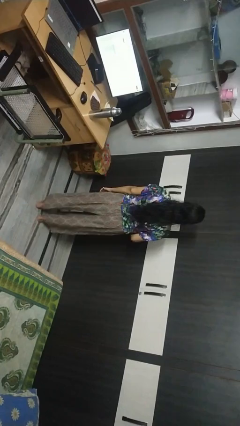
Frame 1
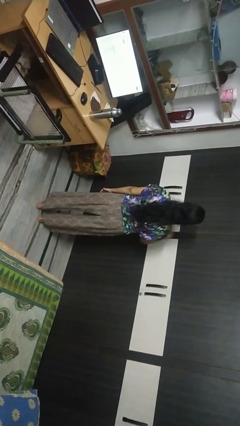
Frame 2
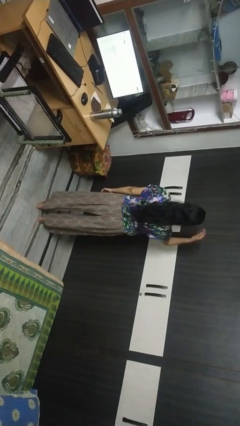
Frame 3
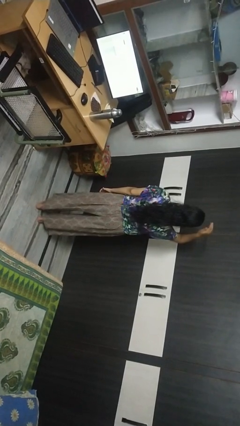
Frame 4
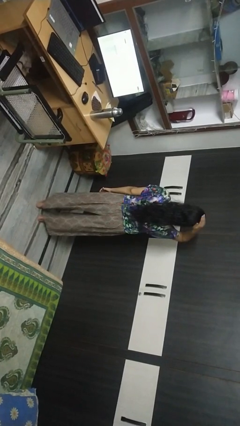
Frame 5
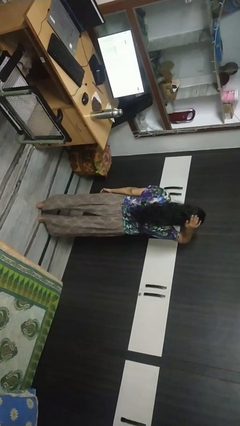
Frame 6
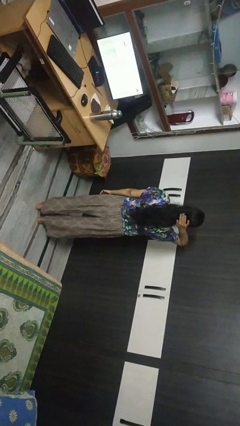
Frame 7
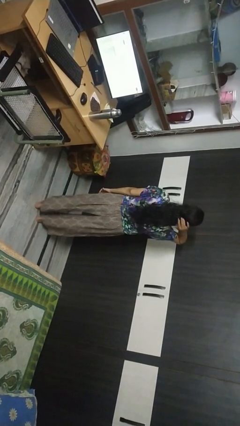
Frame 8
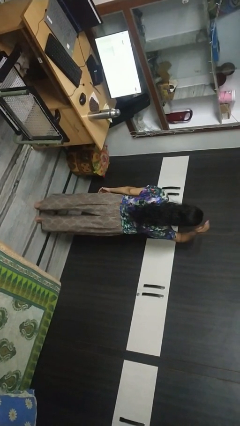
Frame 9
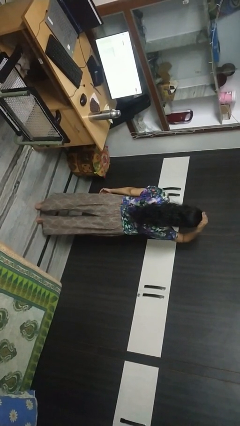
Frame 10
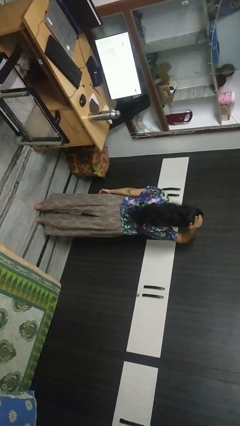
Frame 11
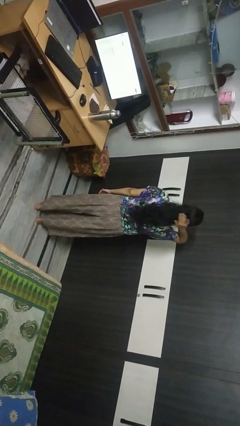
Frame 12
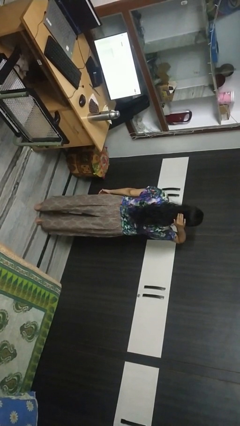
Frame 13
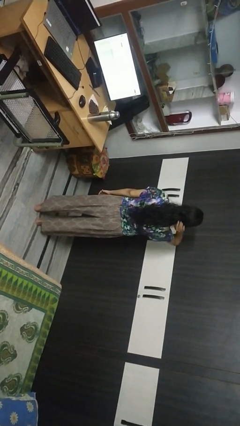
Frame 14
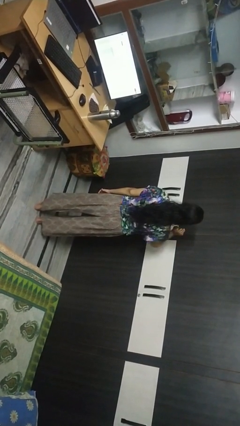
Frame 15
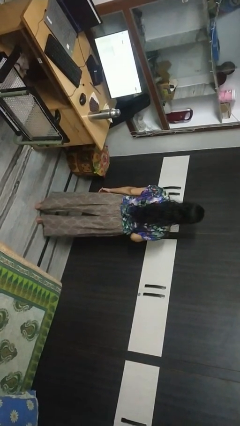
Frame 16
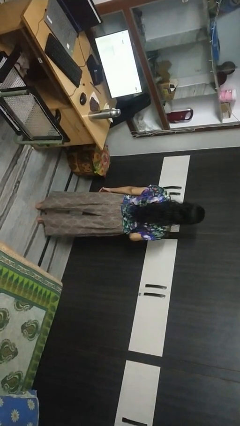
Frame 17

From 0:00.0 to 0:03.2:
person pats head

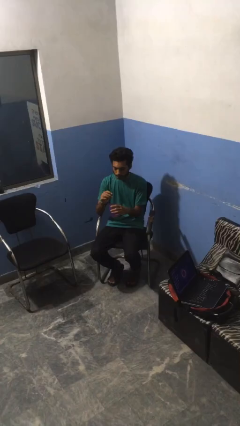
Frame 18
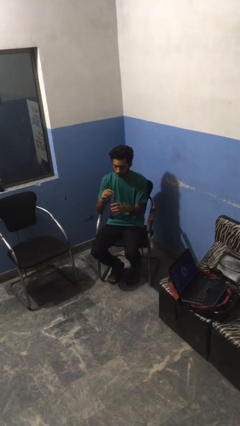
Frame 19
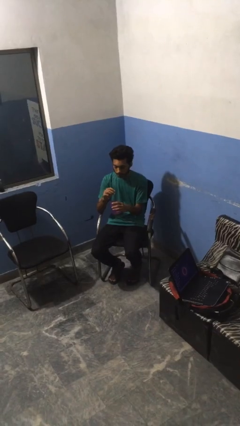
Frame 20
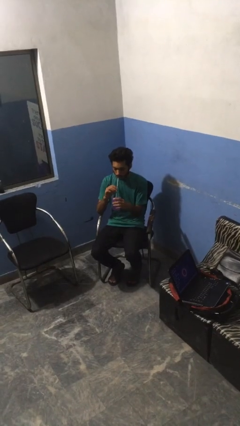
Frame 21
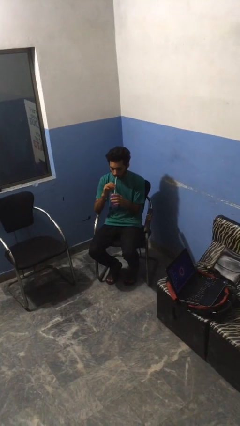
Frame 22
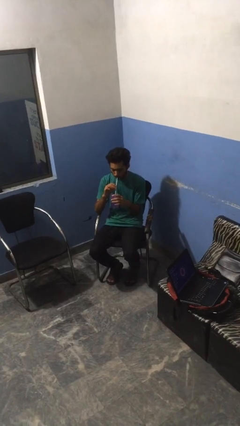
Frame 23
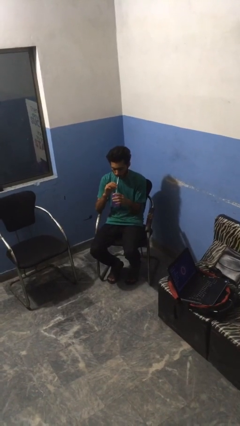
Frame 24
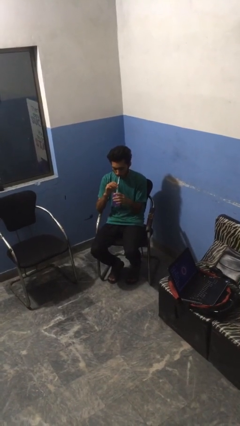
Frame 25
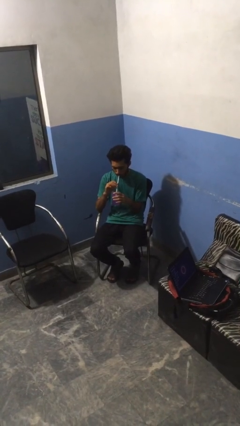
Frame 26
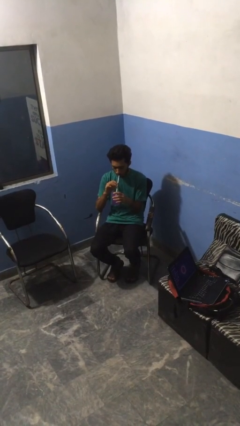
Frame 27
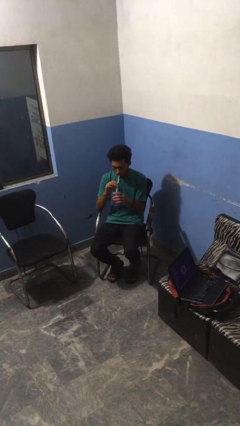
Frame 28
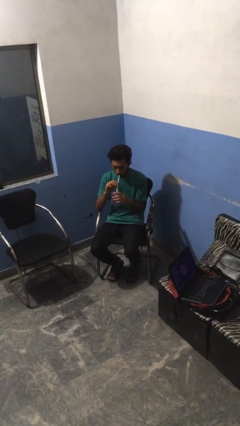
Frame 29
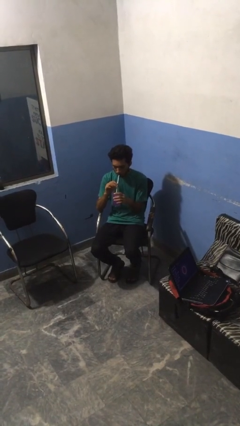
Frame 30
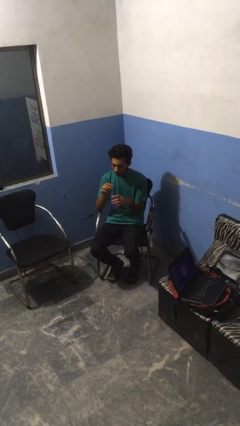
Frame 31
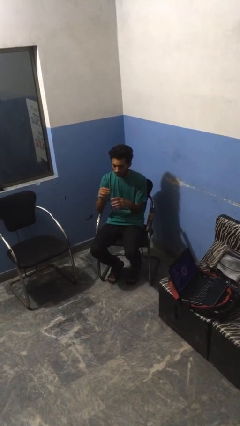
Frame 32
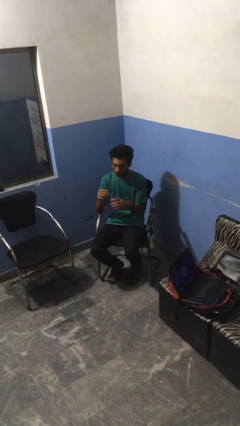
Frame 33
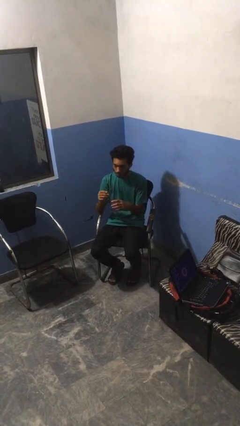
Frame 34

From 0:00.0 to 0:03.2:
person drinks from straw

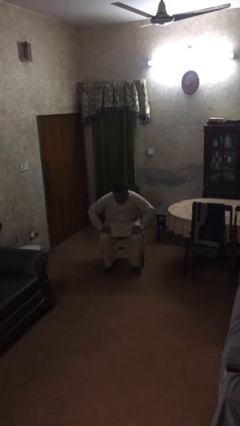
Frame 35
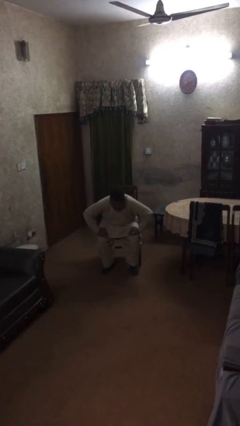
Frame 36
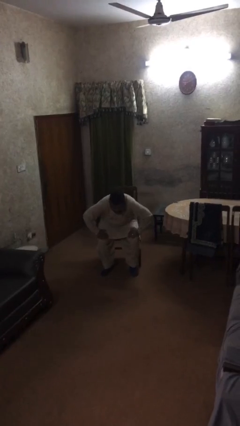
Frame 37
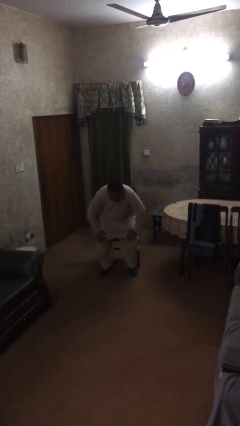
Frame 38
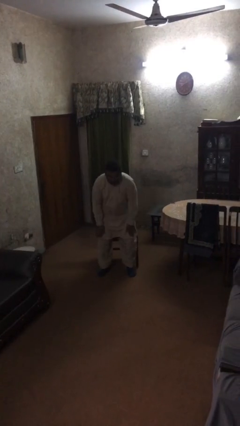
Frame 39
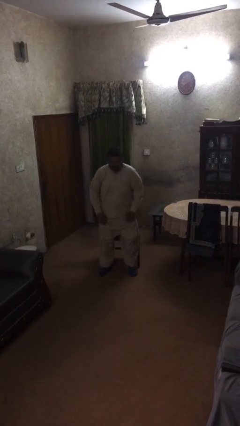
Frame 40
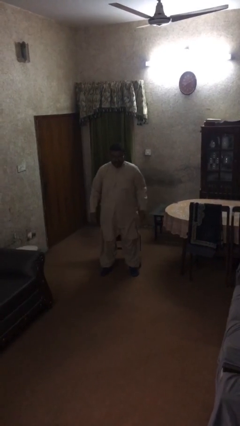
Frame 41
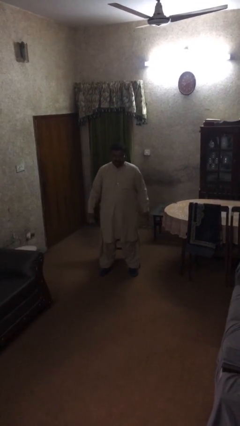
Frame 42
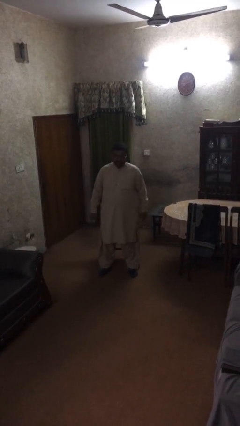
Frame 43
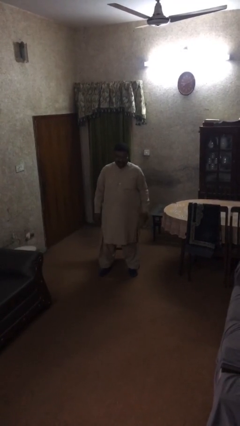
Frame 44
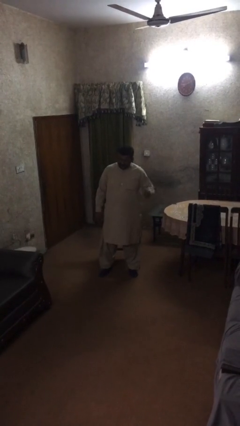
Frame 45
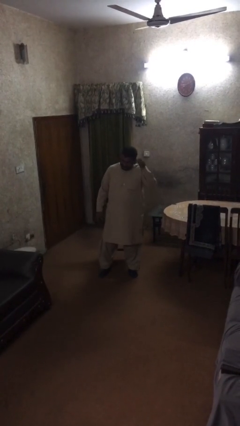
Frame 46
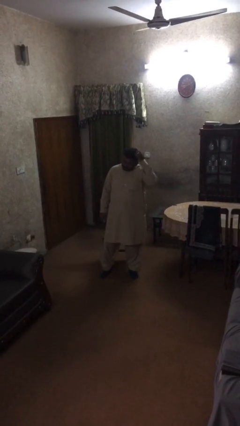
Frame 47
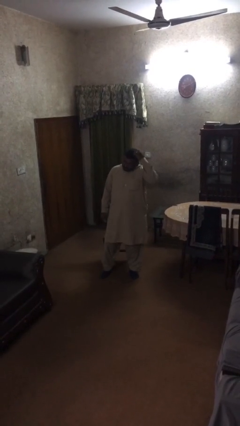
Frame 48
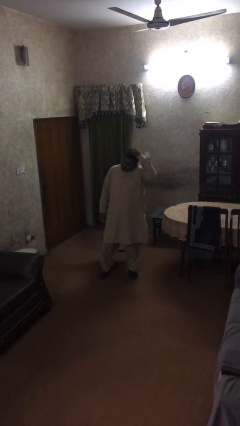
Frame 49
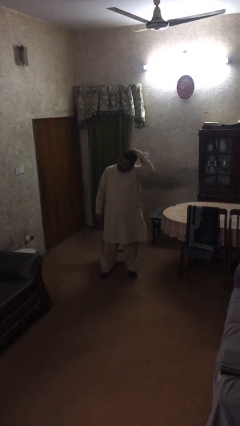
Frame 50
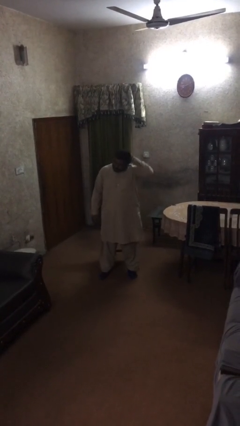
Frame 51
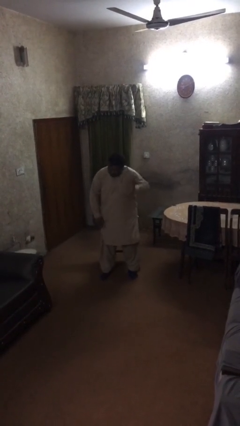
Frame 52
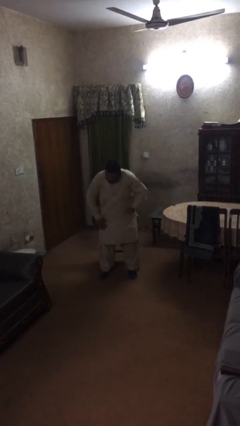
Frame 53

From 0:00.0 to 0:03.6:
person stands up

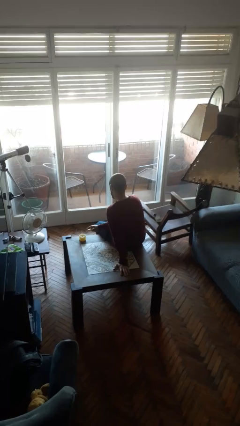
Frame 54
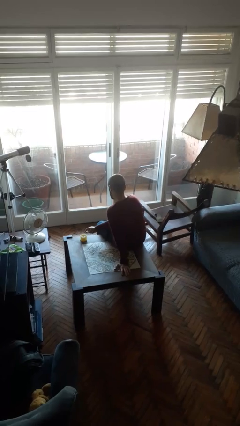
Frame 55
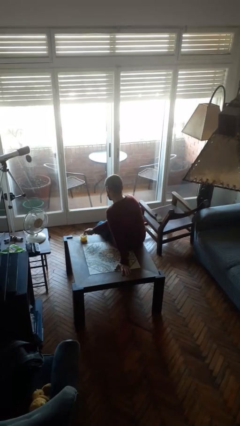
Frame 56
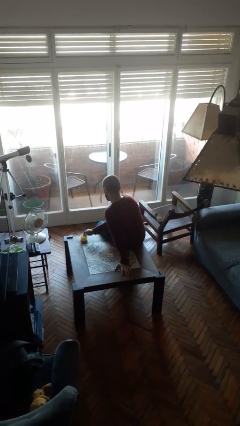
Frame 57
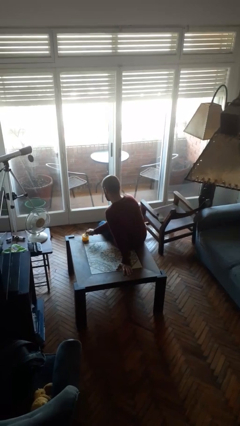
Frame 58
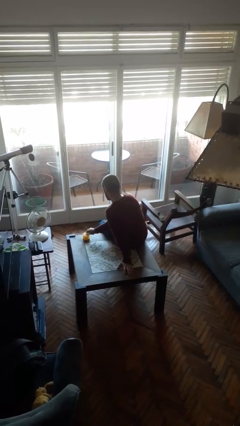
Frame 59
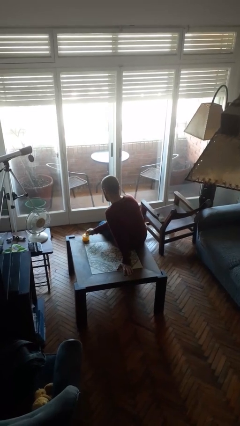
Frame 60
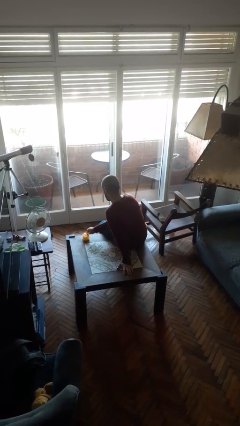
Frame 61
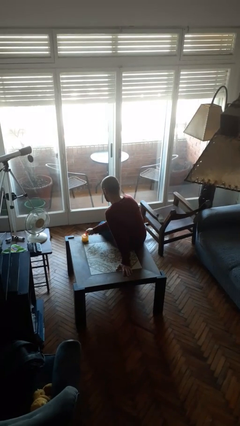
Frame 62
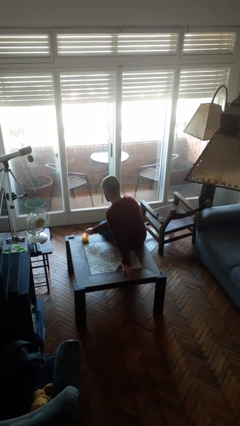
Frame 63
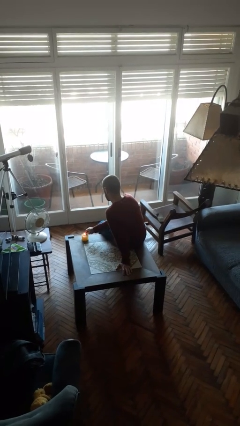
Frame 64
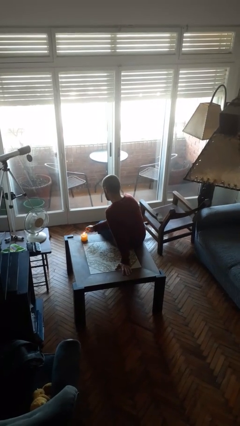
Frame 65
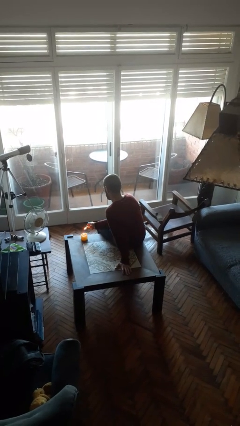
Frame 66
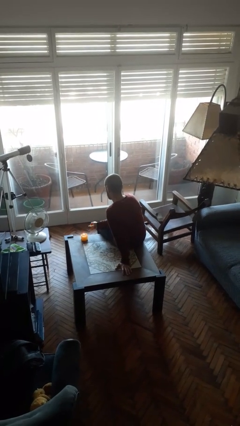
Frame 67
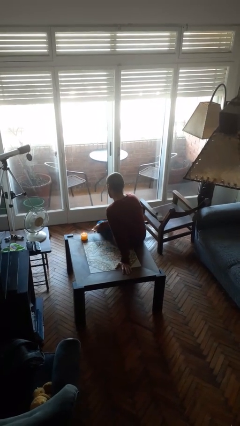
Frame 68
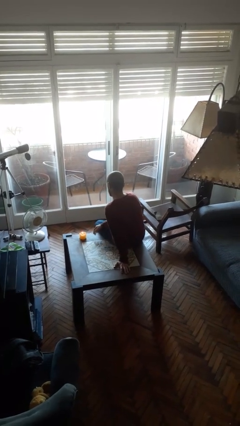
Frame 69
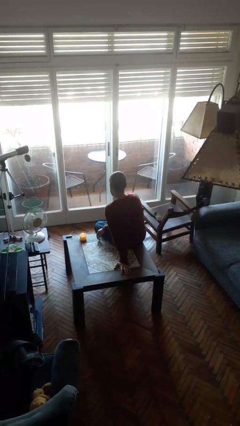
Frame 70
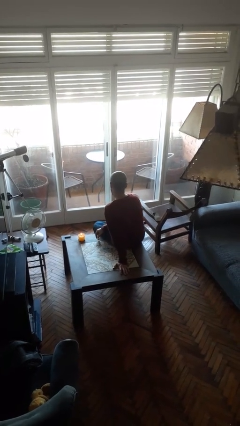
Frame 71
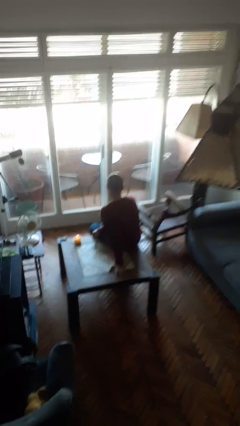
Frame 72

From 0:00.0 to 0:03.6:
person lights candle

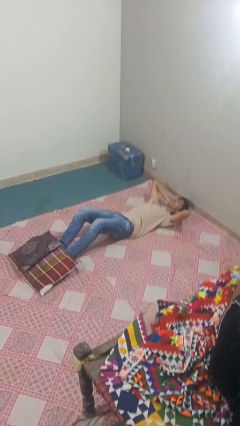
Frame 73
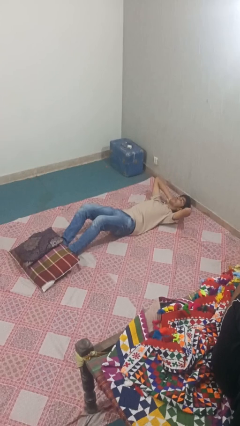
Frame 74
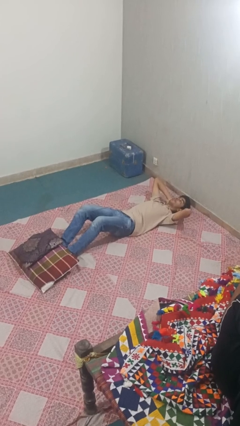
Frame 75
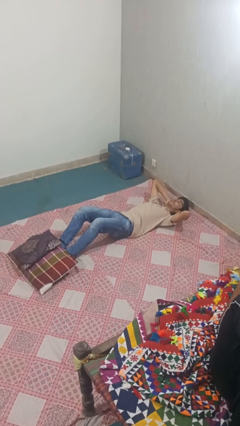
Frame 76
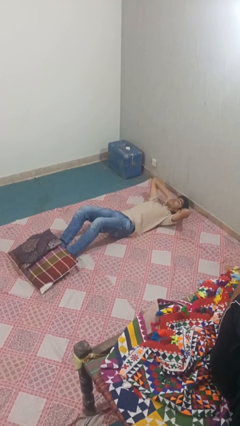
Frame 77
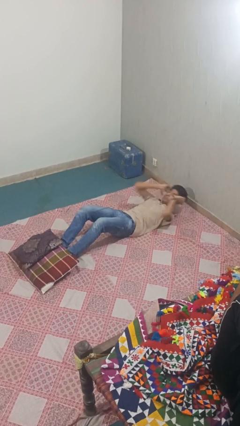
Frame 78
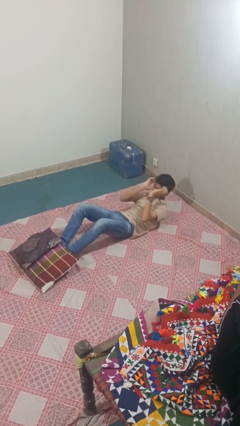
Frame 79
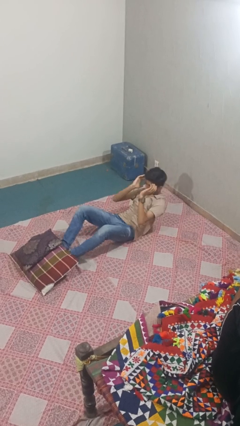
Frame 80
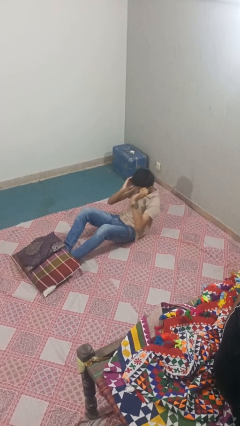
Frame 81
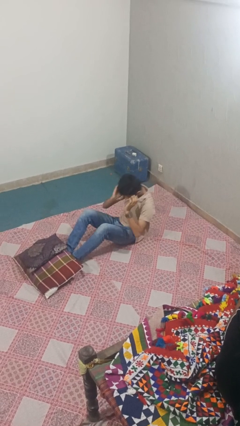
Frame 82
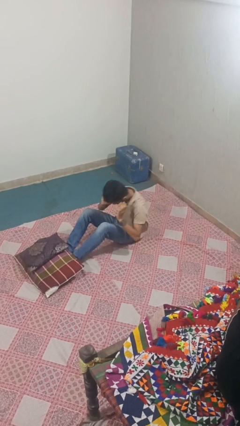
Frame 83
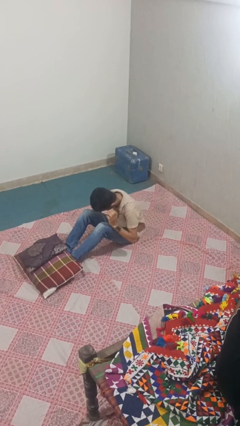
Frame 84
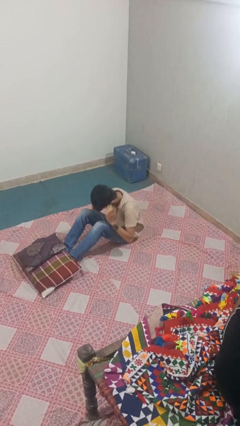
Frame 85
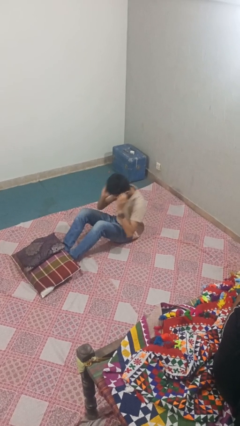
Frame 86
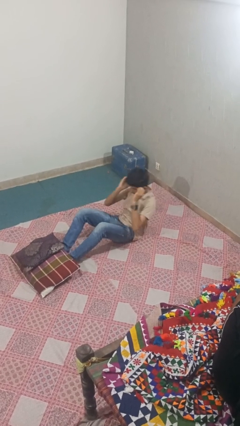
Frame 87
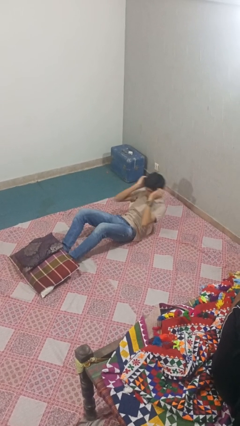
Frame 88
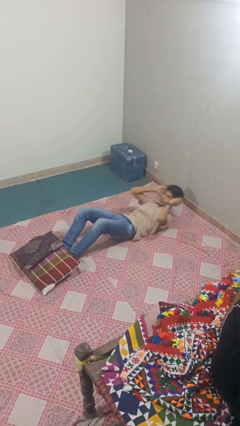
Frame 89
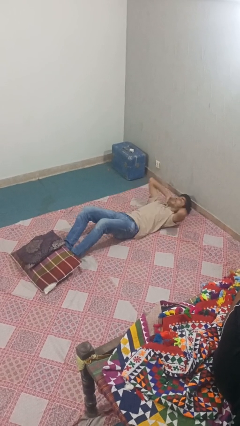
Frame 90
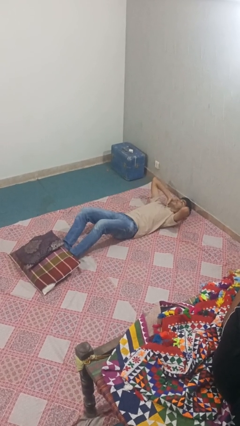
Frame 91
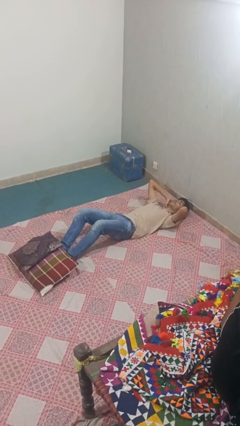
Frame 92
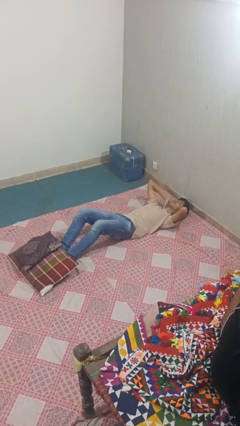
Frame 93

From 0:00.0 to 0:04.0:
person exercises with situp
